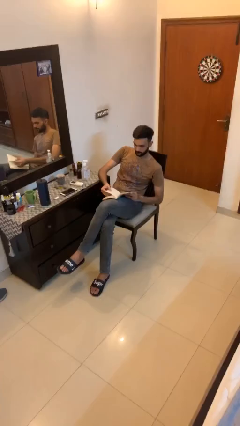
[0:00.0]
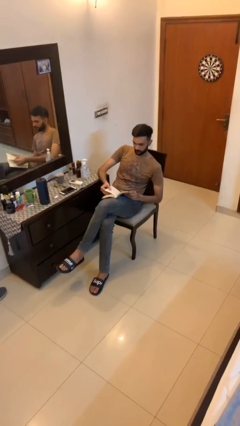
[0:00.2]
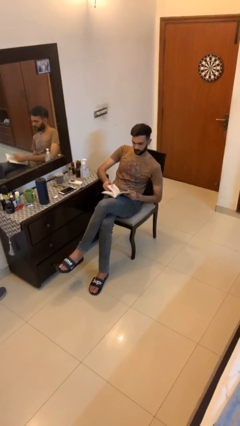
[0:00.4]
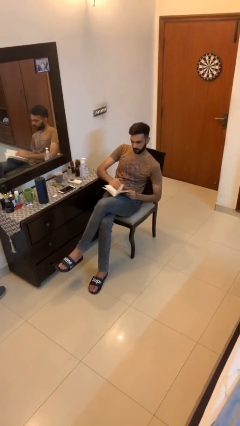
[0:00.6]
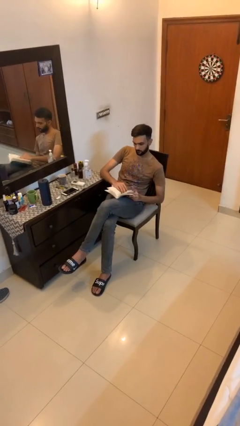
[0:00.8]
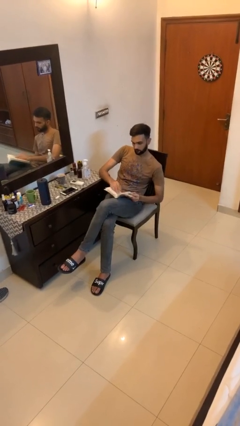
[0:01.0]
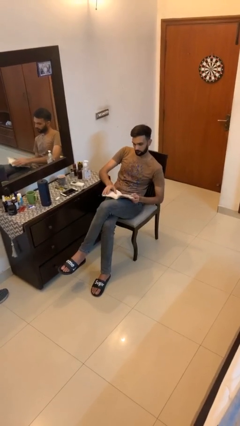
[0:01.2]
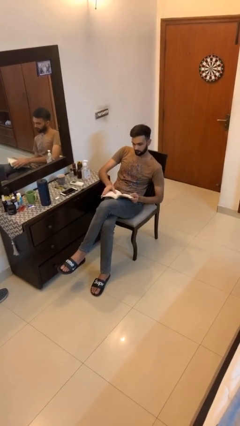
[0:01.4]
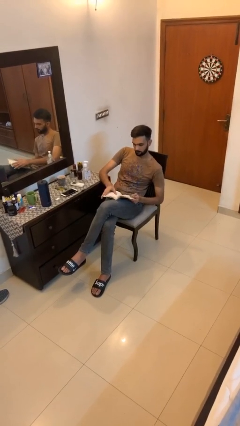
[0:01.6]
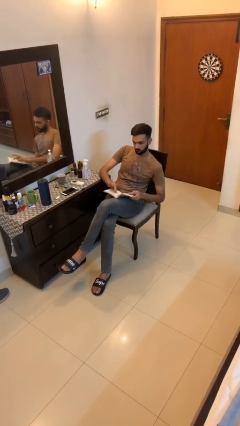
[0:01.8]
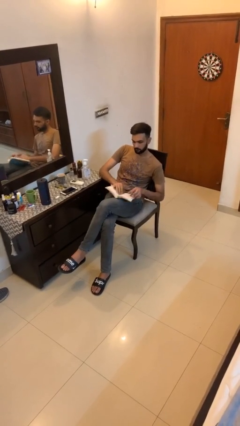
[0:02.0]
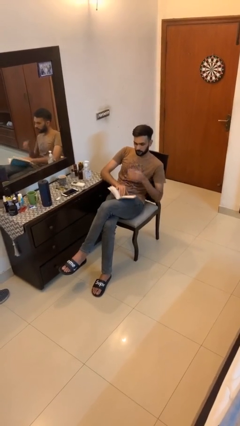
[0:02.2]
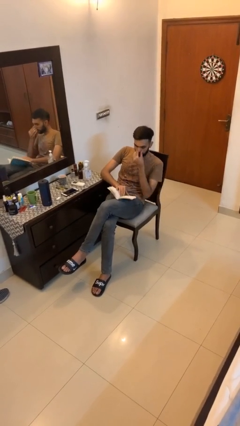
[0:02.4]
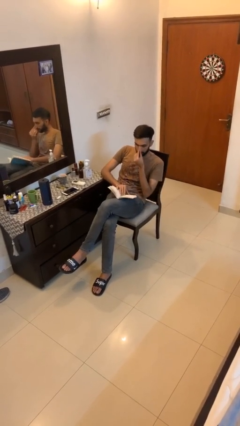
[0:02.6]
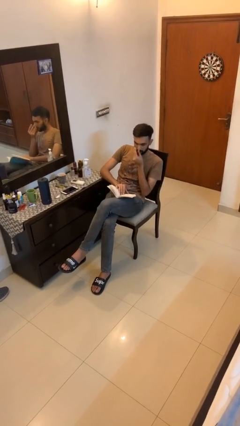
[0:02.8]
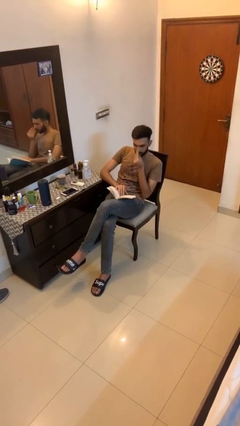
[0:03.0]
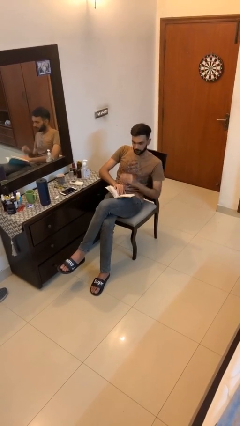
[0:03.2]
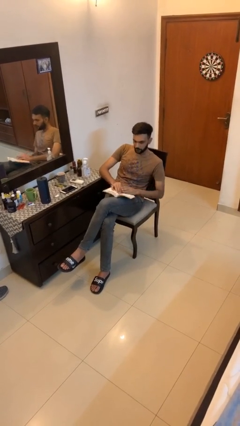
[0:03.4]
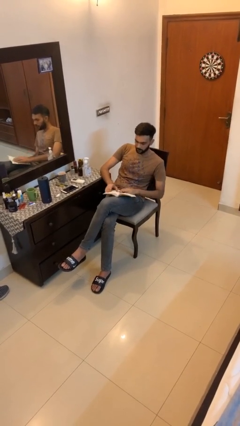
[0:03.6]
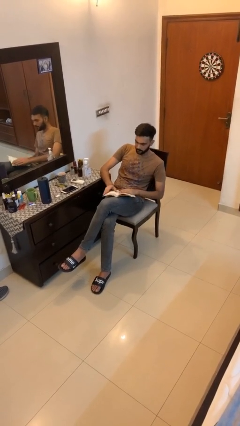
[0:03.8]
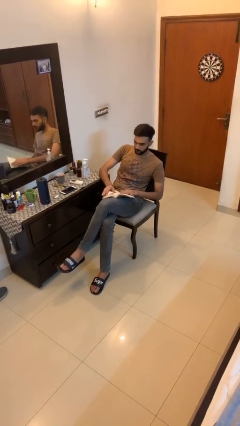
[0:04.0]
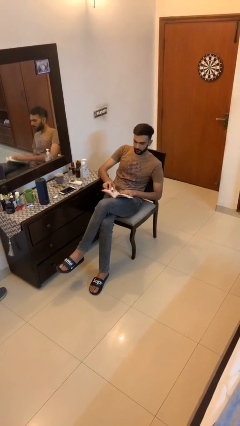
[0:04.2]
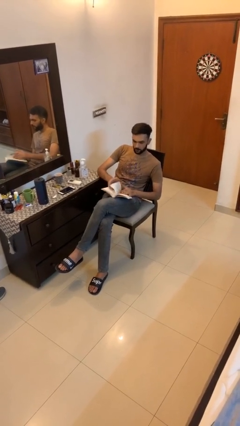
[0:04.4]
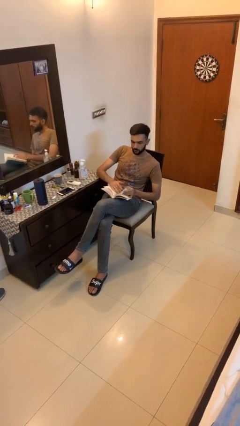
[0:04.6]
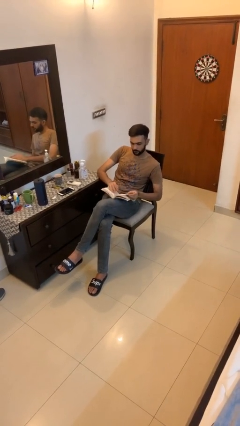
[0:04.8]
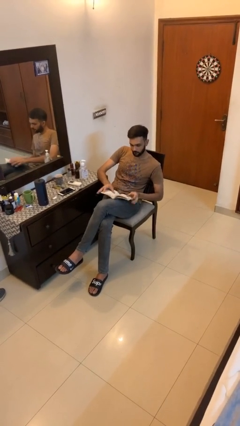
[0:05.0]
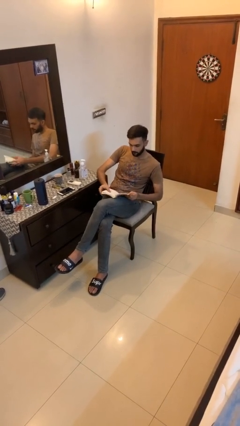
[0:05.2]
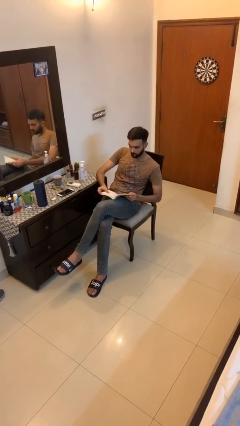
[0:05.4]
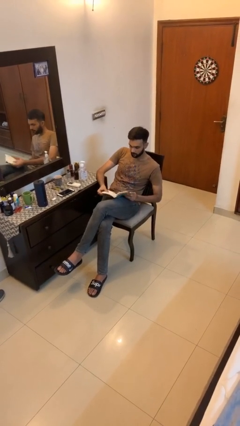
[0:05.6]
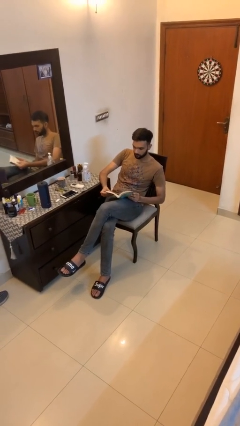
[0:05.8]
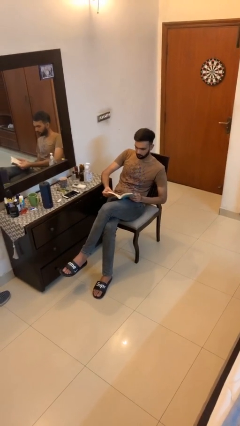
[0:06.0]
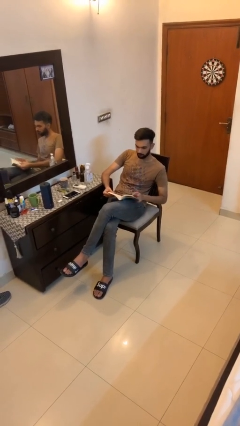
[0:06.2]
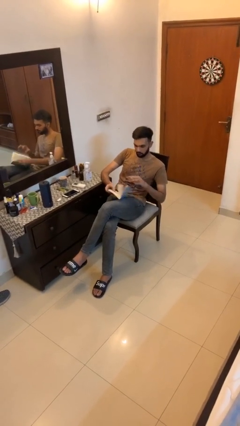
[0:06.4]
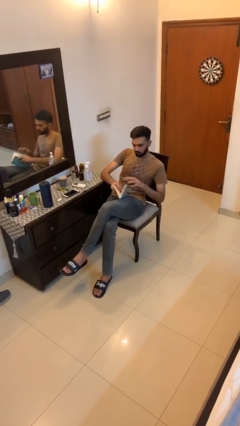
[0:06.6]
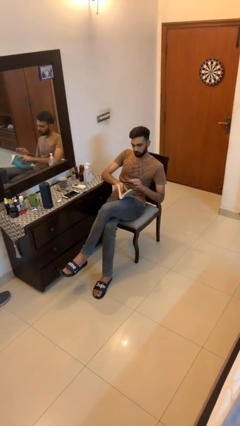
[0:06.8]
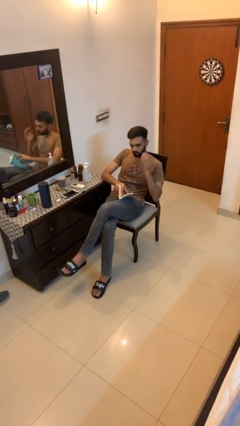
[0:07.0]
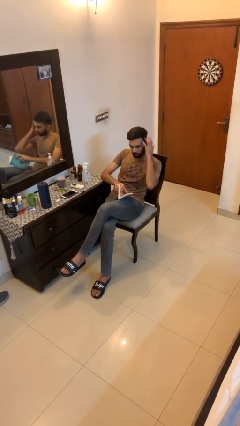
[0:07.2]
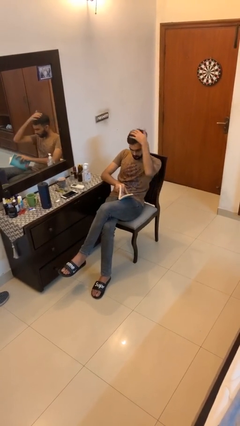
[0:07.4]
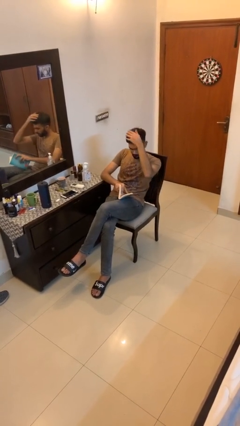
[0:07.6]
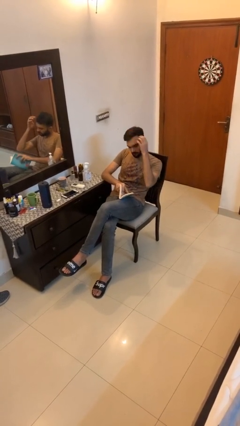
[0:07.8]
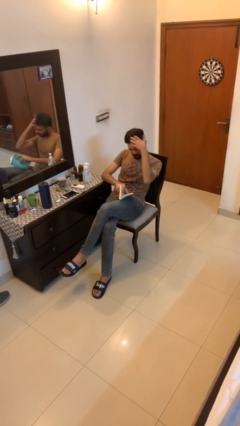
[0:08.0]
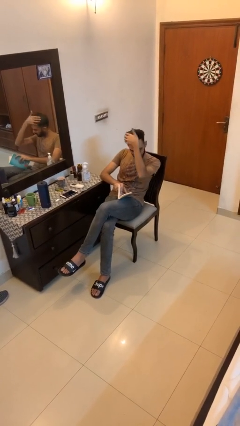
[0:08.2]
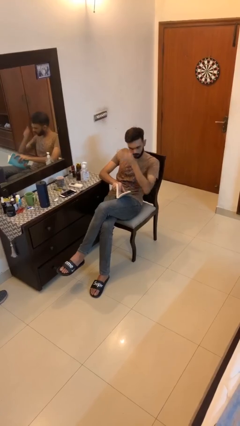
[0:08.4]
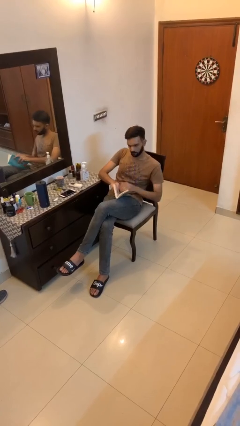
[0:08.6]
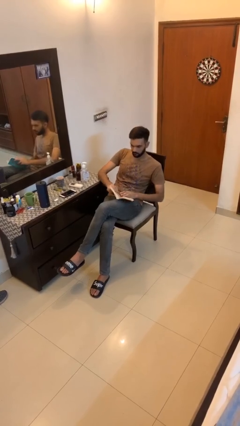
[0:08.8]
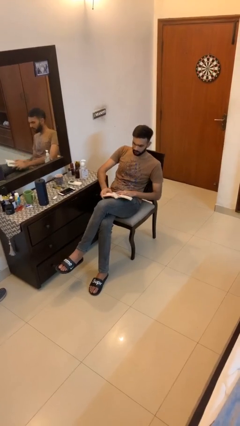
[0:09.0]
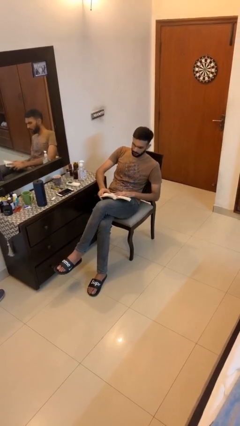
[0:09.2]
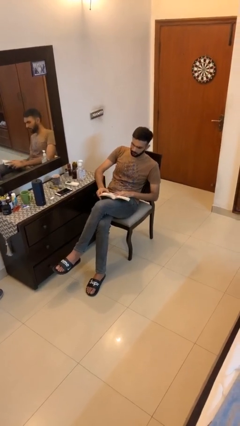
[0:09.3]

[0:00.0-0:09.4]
person reads document

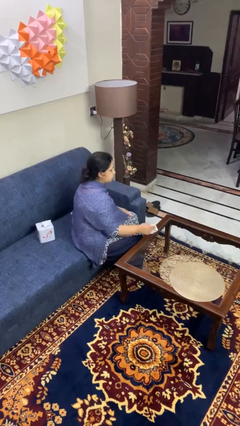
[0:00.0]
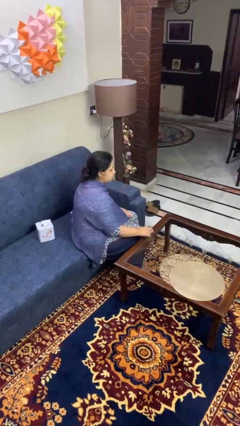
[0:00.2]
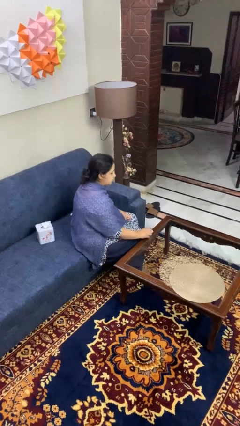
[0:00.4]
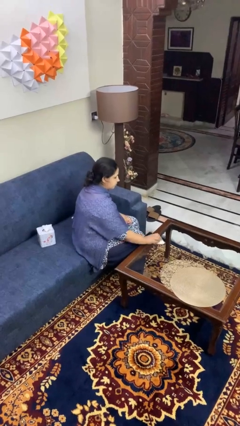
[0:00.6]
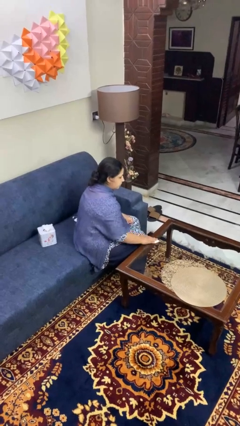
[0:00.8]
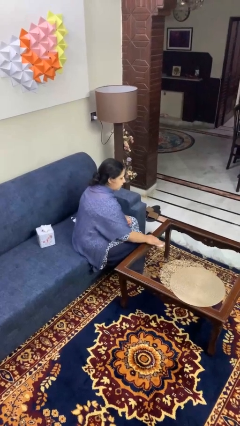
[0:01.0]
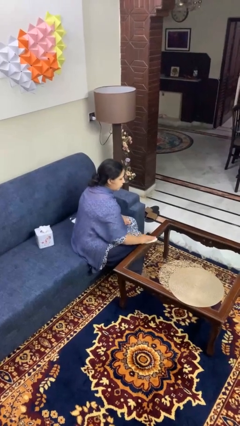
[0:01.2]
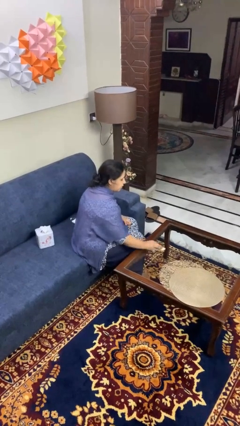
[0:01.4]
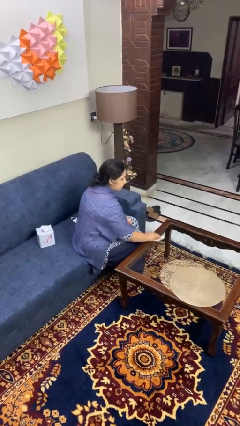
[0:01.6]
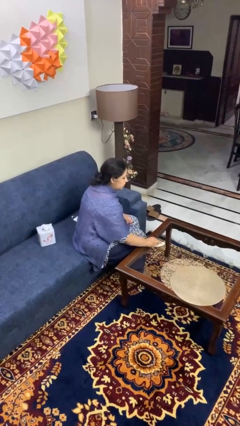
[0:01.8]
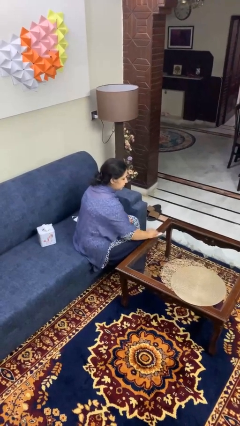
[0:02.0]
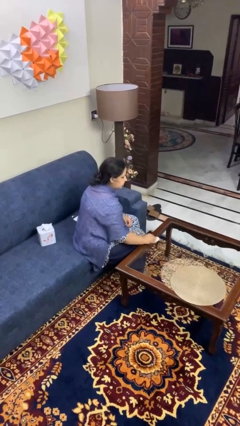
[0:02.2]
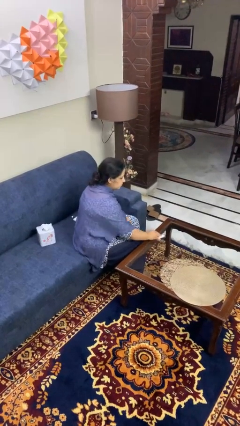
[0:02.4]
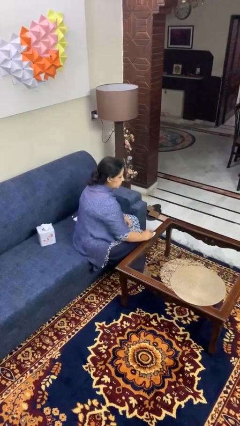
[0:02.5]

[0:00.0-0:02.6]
person cleans table with rag

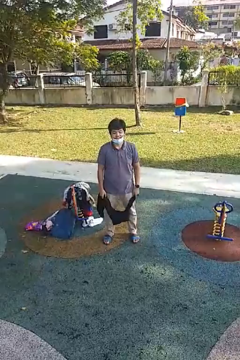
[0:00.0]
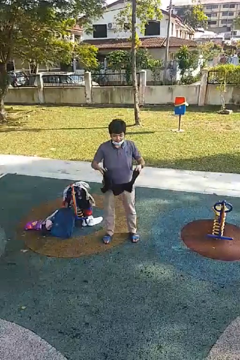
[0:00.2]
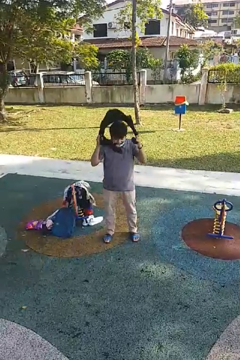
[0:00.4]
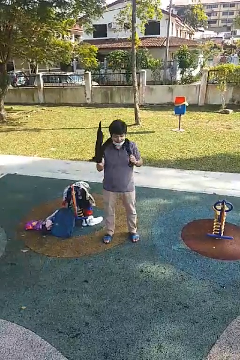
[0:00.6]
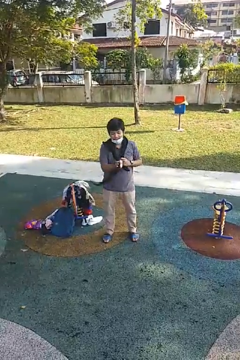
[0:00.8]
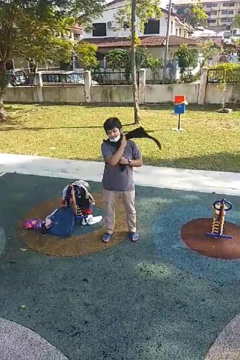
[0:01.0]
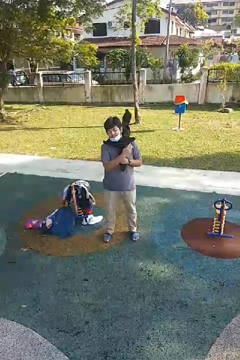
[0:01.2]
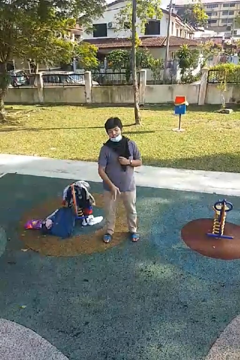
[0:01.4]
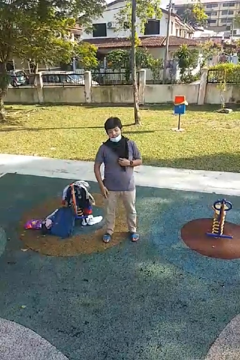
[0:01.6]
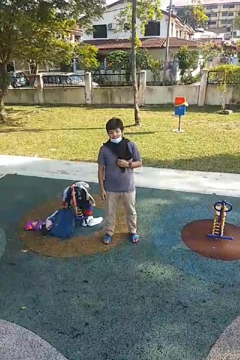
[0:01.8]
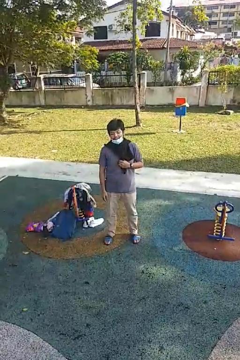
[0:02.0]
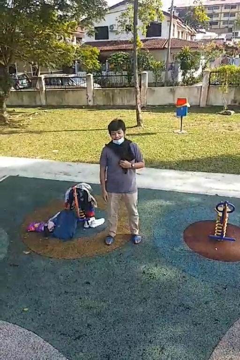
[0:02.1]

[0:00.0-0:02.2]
person puts on scarf

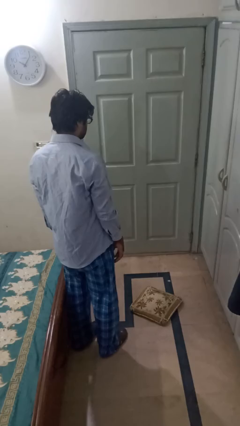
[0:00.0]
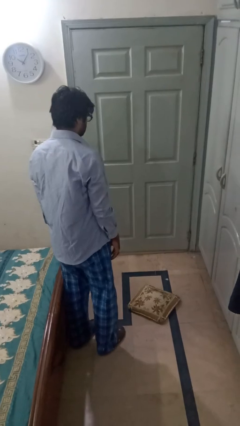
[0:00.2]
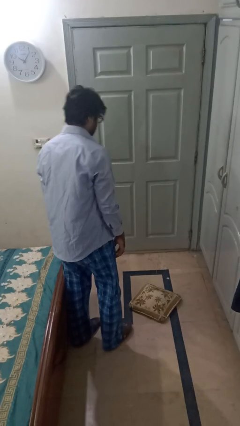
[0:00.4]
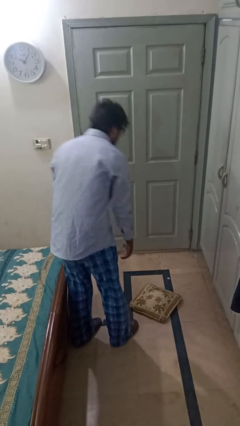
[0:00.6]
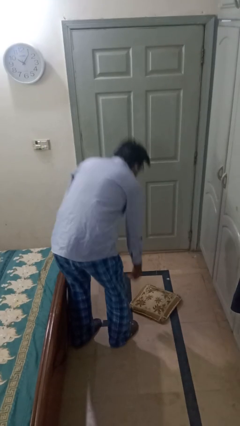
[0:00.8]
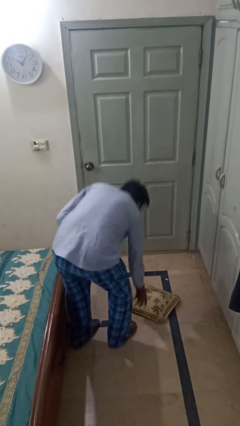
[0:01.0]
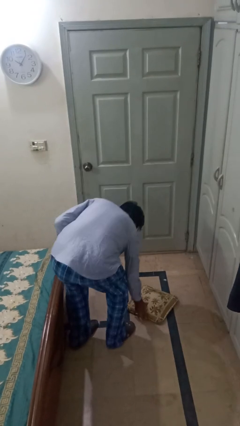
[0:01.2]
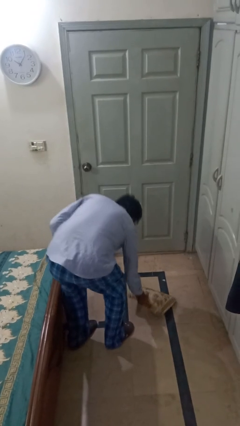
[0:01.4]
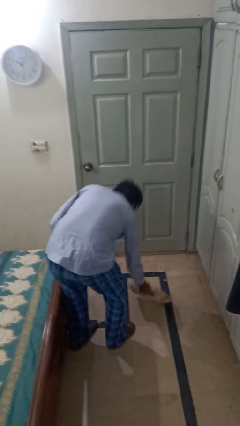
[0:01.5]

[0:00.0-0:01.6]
person picks up object from floor

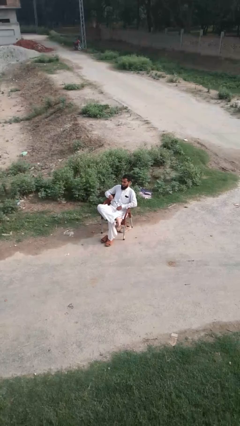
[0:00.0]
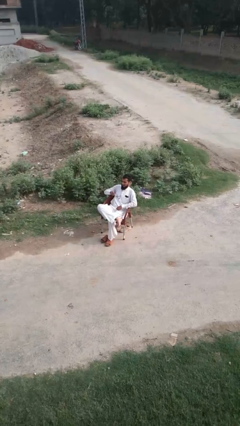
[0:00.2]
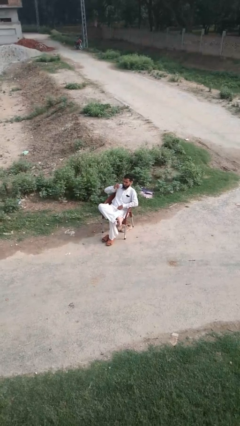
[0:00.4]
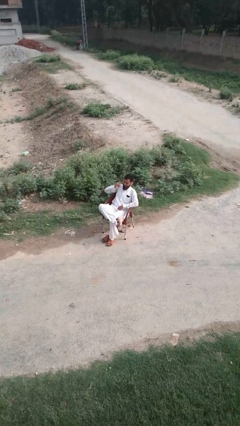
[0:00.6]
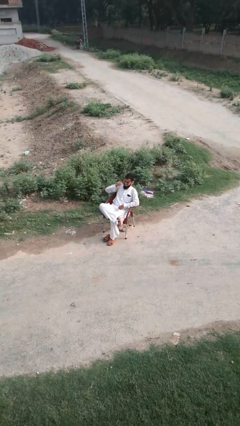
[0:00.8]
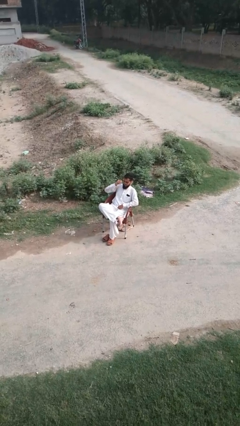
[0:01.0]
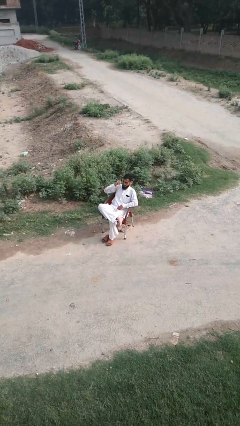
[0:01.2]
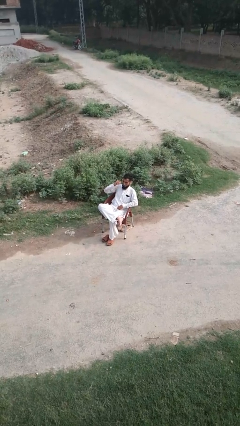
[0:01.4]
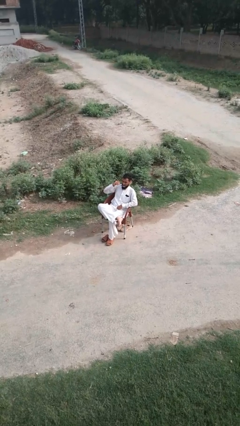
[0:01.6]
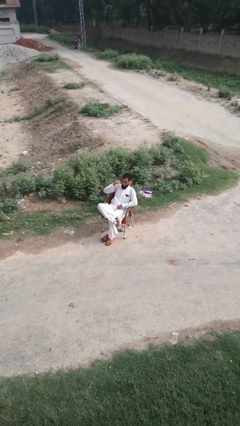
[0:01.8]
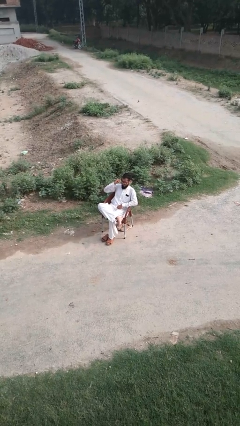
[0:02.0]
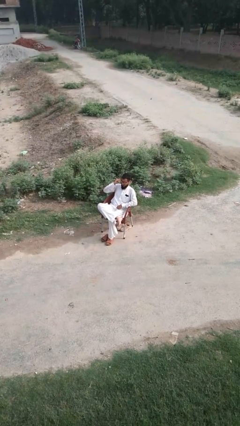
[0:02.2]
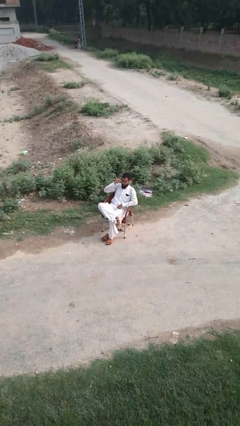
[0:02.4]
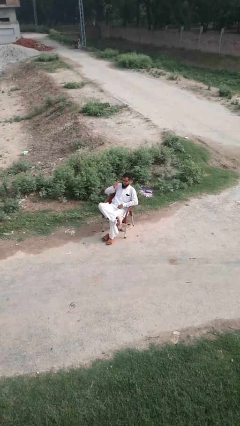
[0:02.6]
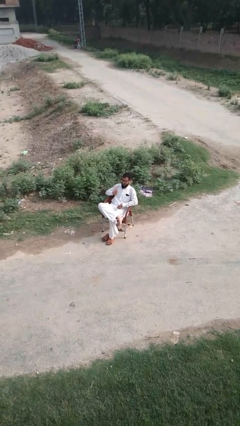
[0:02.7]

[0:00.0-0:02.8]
person puts on glasses
